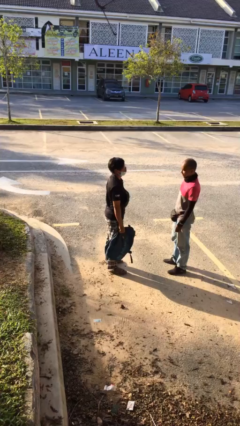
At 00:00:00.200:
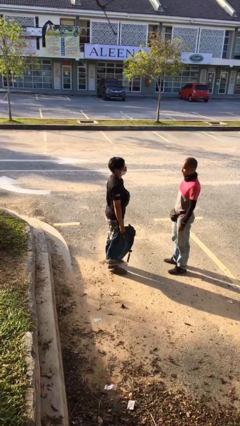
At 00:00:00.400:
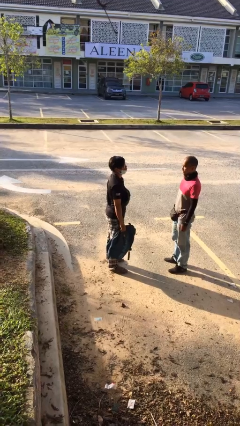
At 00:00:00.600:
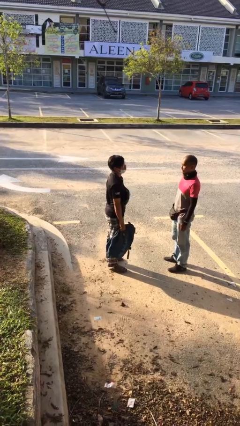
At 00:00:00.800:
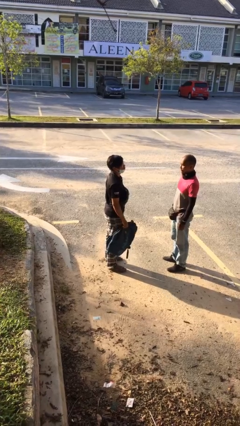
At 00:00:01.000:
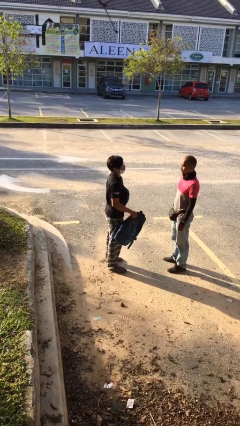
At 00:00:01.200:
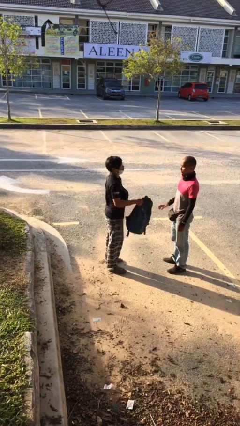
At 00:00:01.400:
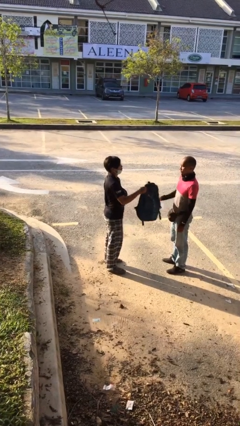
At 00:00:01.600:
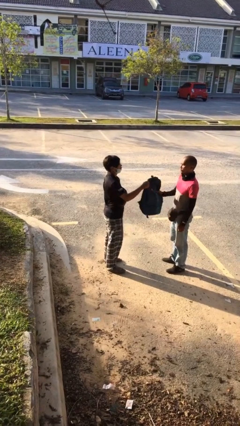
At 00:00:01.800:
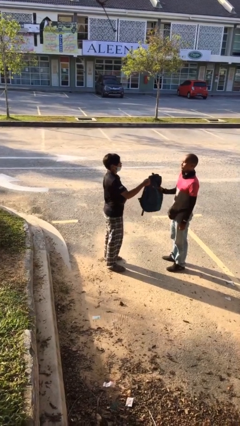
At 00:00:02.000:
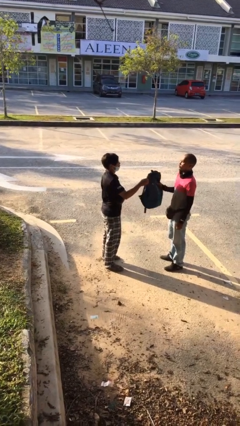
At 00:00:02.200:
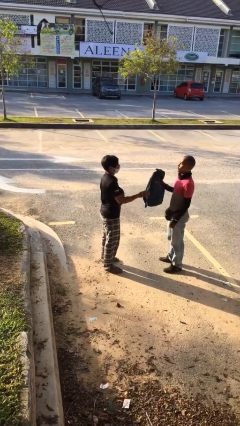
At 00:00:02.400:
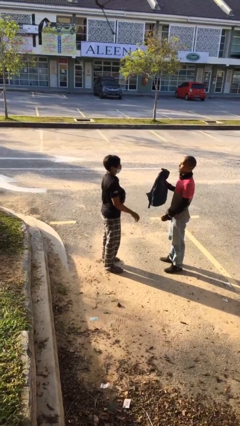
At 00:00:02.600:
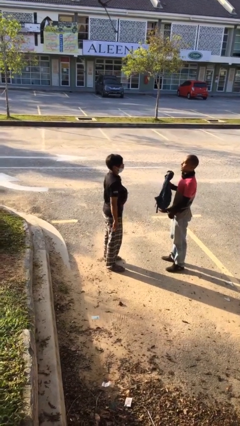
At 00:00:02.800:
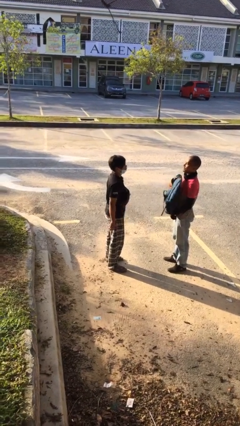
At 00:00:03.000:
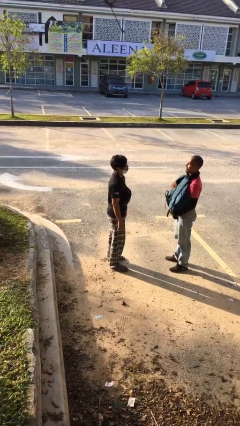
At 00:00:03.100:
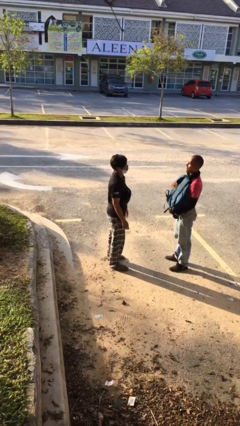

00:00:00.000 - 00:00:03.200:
person transfers object to person

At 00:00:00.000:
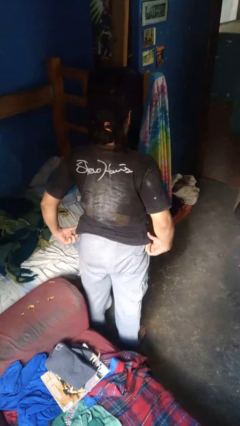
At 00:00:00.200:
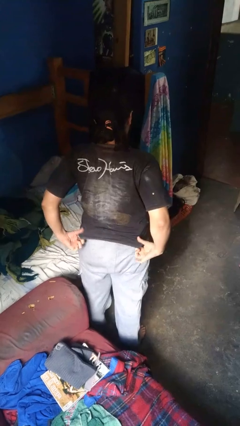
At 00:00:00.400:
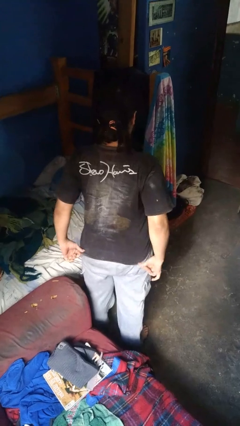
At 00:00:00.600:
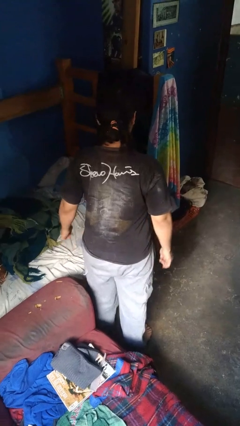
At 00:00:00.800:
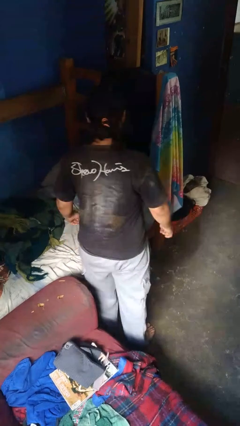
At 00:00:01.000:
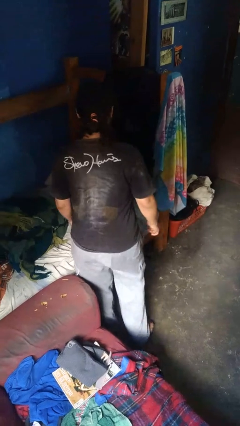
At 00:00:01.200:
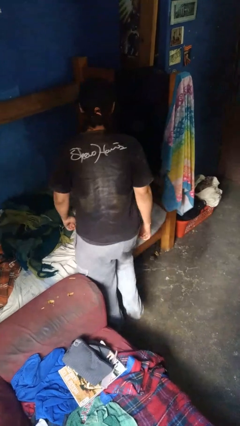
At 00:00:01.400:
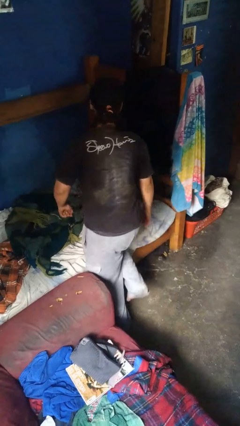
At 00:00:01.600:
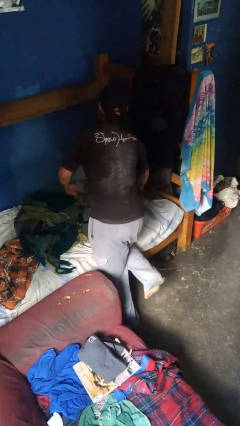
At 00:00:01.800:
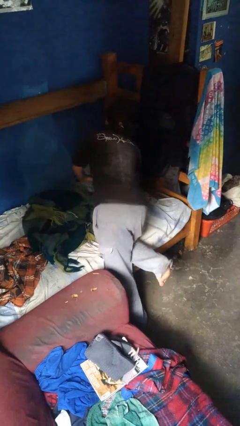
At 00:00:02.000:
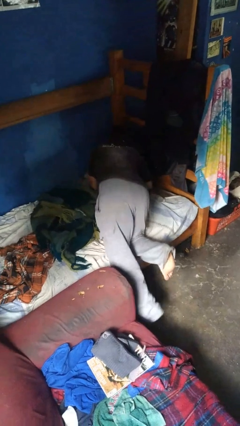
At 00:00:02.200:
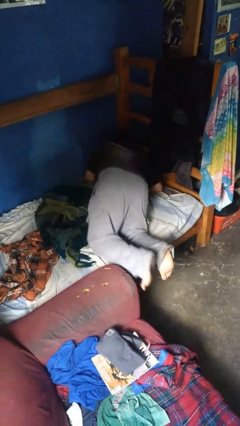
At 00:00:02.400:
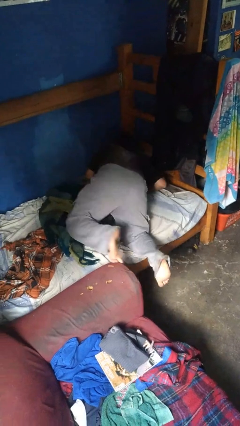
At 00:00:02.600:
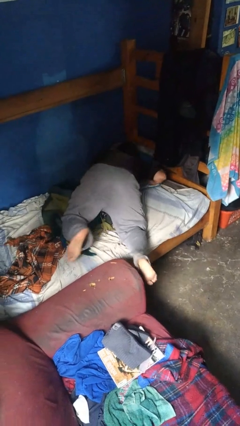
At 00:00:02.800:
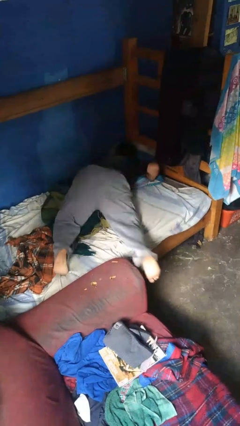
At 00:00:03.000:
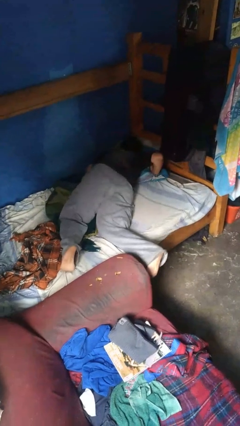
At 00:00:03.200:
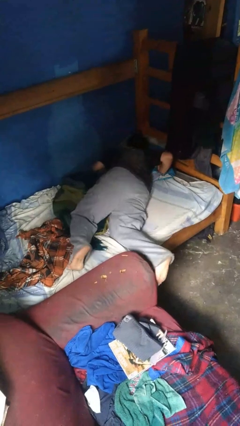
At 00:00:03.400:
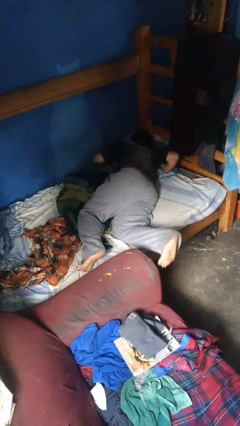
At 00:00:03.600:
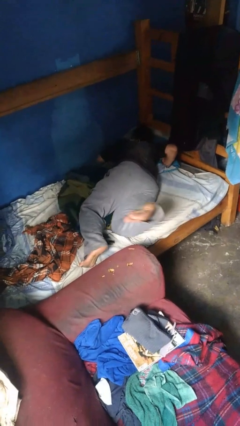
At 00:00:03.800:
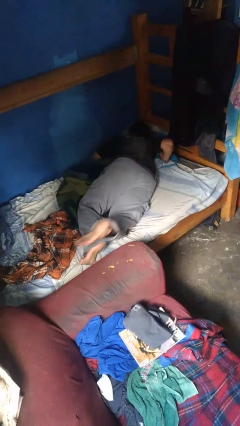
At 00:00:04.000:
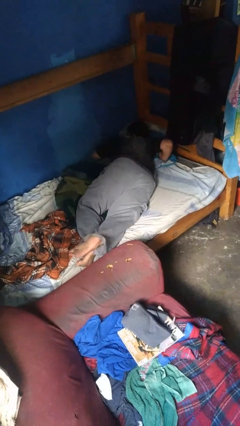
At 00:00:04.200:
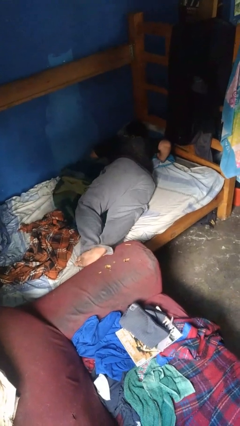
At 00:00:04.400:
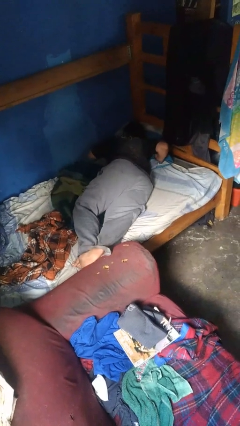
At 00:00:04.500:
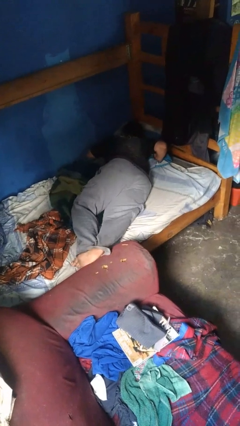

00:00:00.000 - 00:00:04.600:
person lies down on bed

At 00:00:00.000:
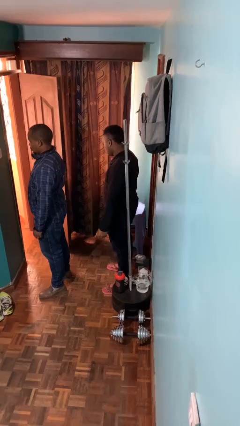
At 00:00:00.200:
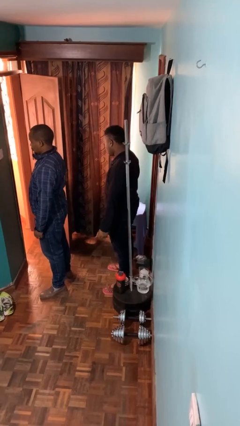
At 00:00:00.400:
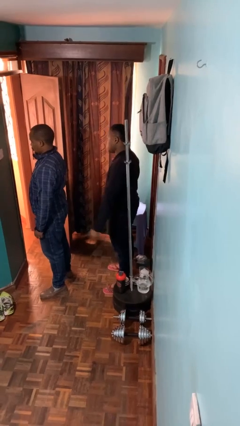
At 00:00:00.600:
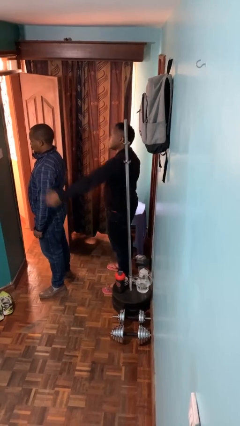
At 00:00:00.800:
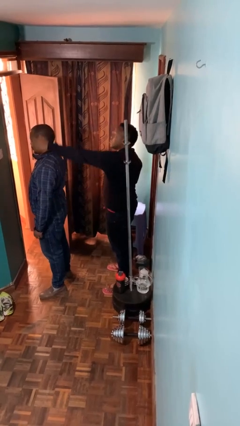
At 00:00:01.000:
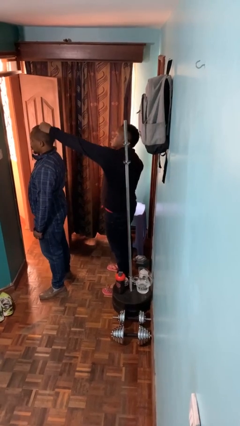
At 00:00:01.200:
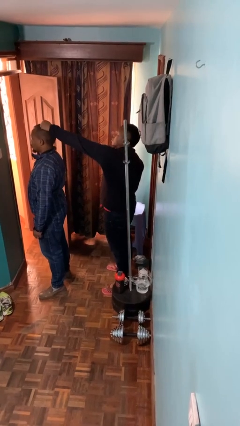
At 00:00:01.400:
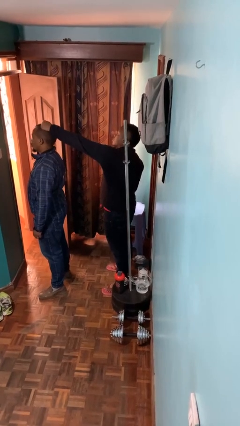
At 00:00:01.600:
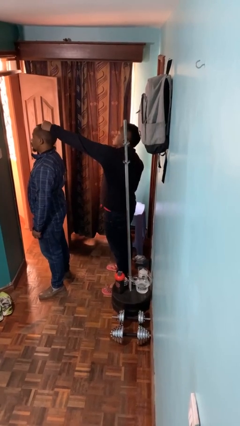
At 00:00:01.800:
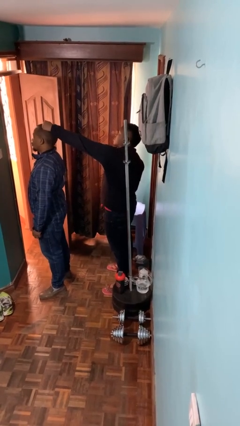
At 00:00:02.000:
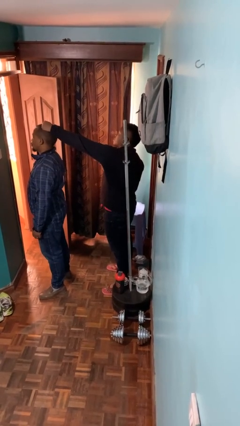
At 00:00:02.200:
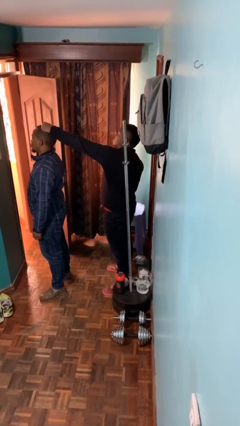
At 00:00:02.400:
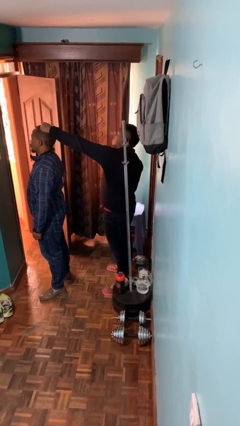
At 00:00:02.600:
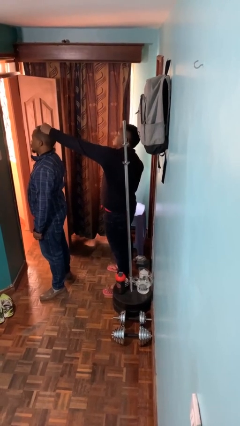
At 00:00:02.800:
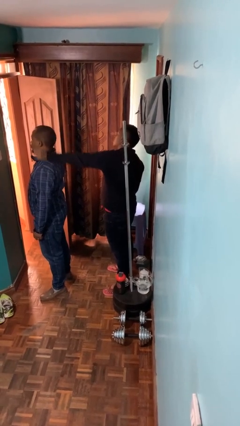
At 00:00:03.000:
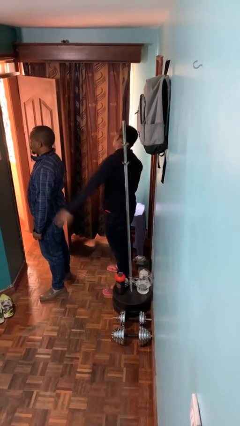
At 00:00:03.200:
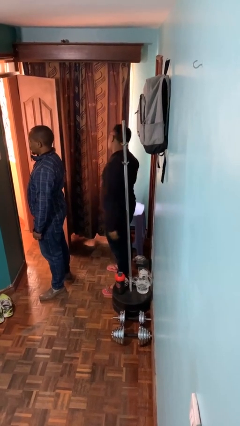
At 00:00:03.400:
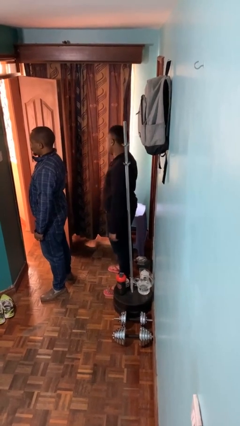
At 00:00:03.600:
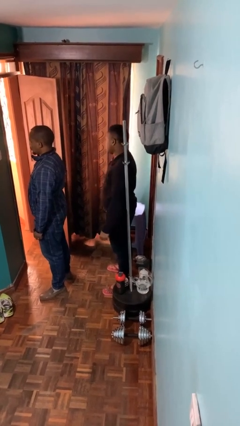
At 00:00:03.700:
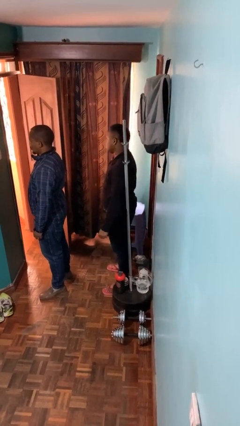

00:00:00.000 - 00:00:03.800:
person grabs person by hair

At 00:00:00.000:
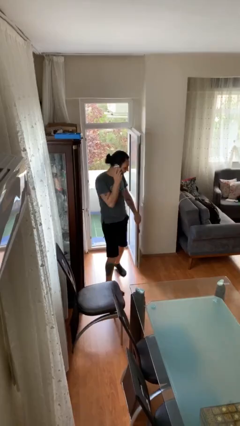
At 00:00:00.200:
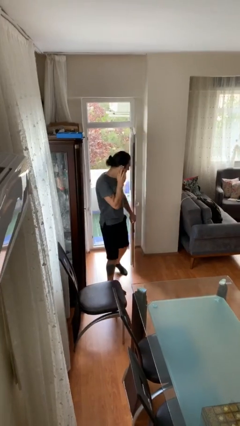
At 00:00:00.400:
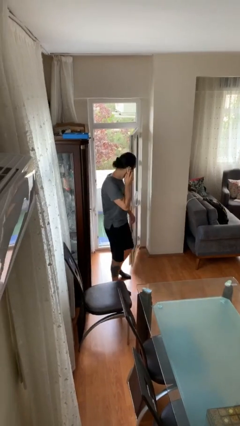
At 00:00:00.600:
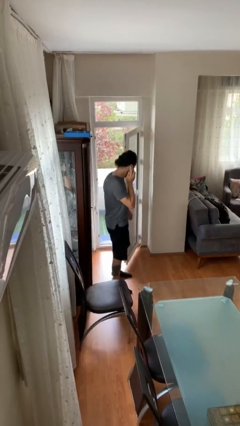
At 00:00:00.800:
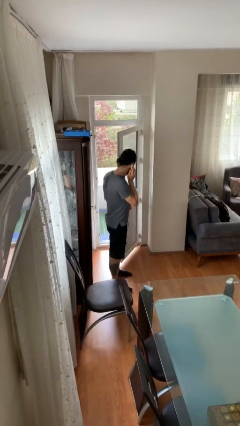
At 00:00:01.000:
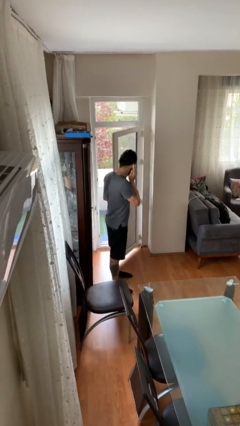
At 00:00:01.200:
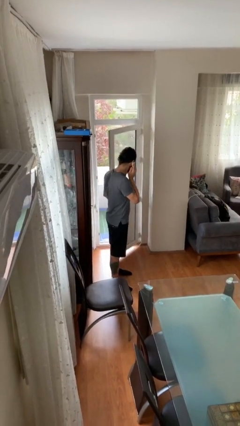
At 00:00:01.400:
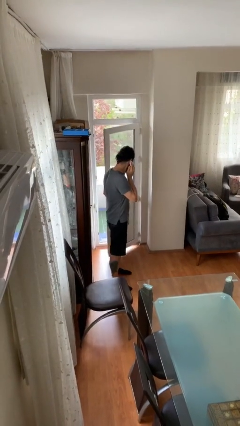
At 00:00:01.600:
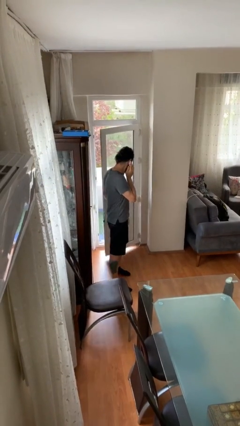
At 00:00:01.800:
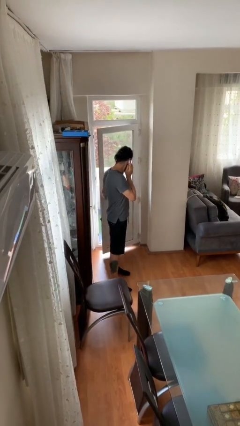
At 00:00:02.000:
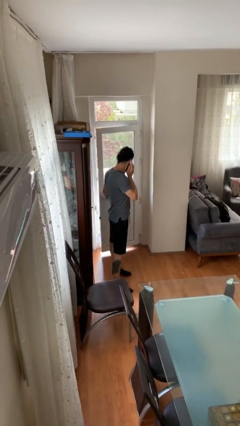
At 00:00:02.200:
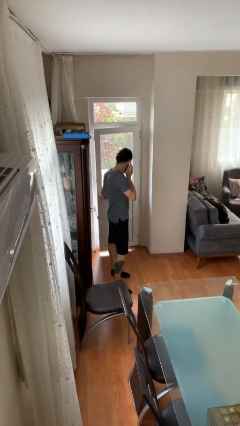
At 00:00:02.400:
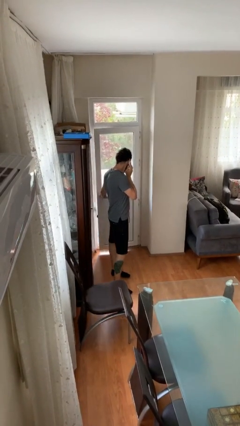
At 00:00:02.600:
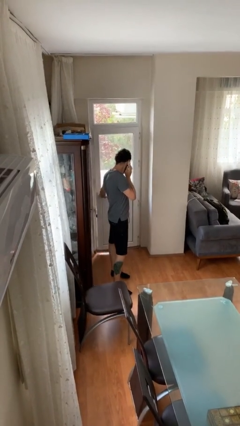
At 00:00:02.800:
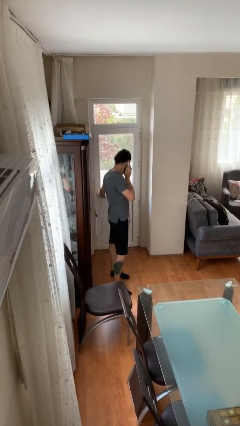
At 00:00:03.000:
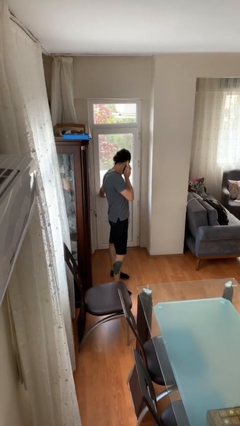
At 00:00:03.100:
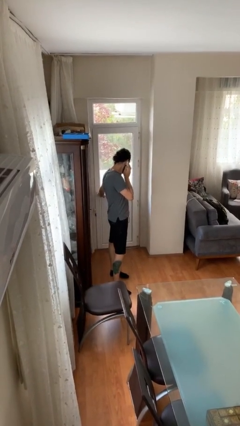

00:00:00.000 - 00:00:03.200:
person closes facility door

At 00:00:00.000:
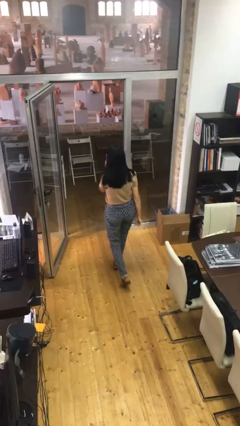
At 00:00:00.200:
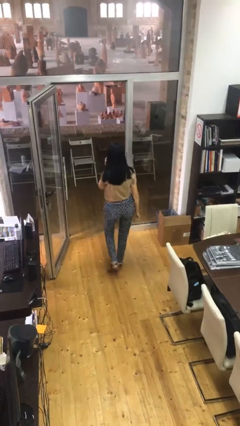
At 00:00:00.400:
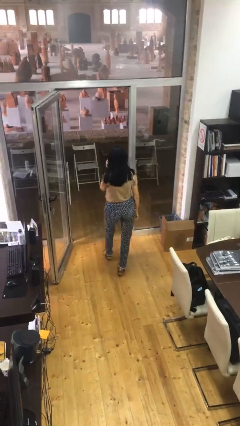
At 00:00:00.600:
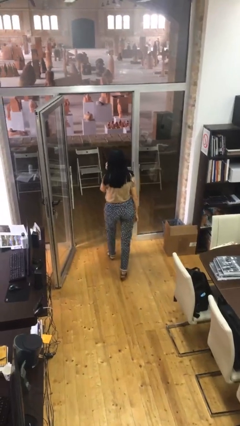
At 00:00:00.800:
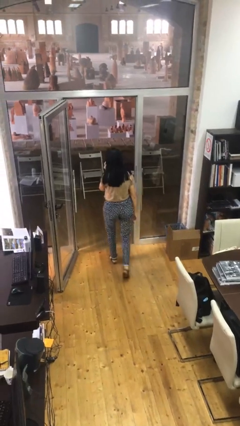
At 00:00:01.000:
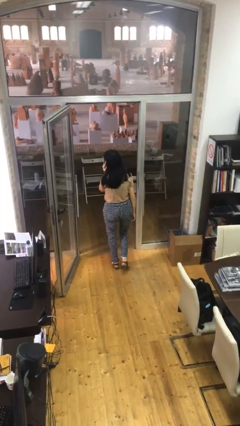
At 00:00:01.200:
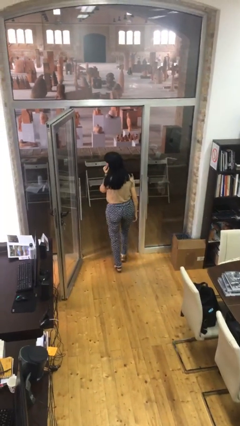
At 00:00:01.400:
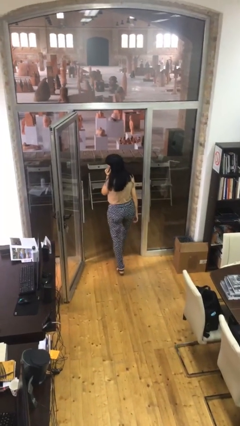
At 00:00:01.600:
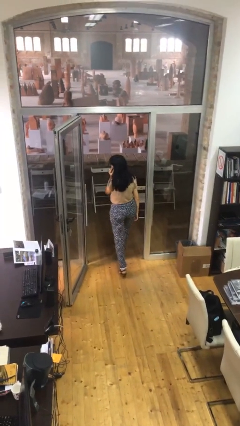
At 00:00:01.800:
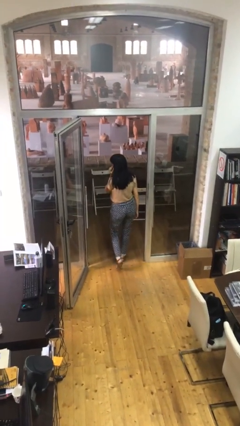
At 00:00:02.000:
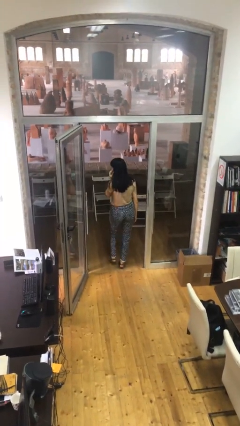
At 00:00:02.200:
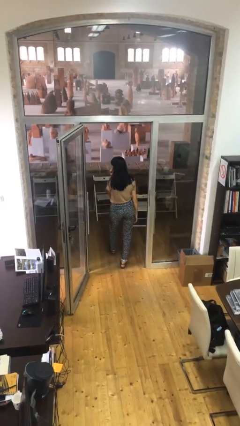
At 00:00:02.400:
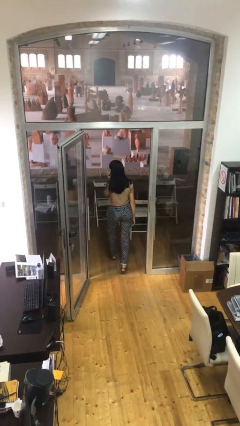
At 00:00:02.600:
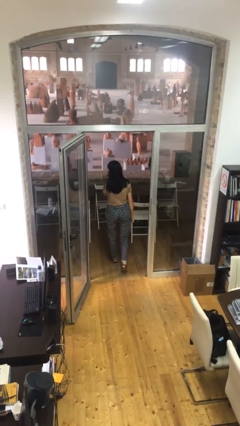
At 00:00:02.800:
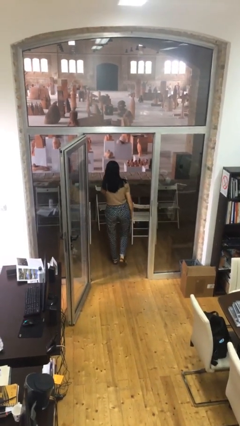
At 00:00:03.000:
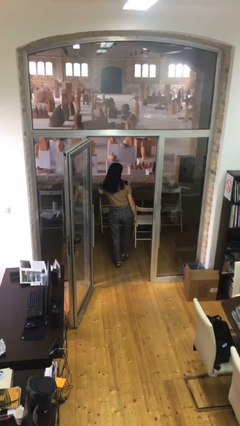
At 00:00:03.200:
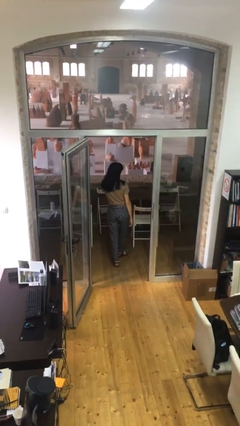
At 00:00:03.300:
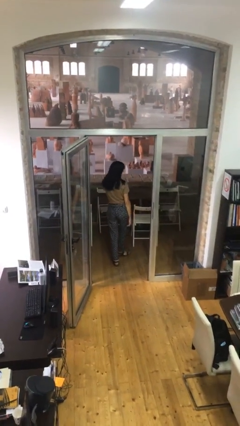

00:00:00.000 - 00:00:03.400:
person exits scene through structure
